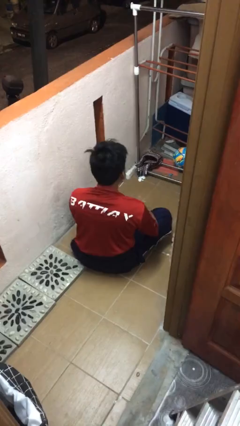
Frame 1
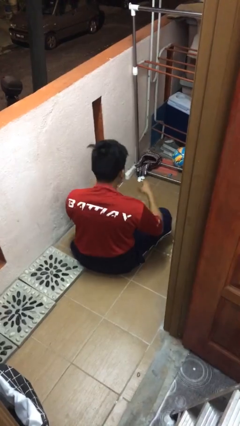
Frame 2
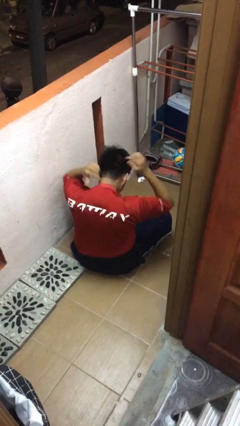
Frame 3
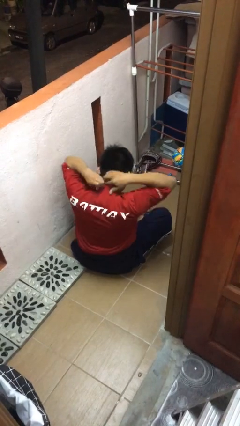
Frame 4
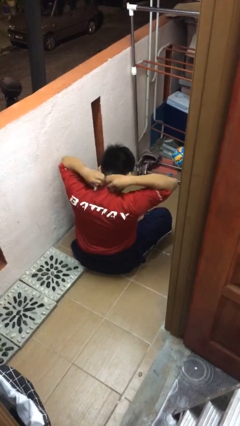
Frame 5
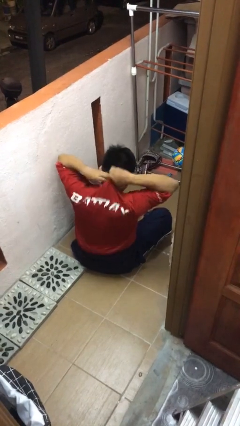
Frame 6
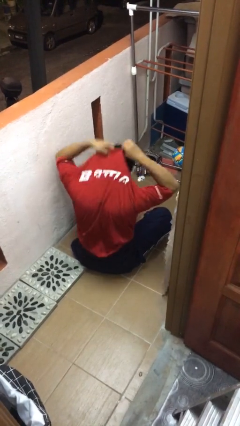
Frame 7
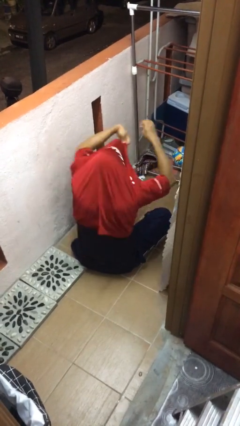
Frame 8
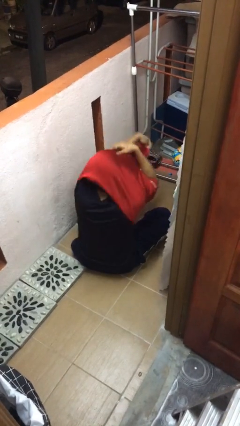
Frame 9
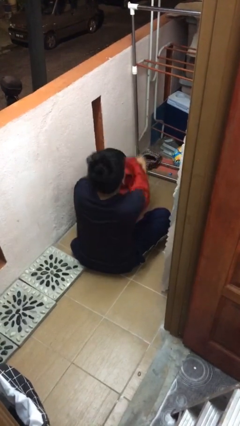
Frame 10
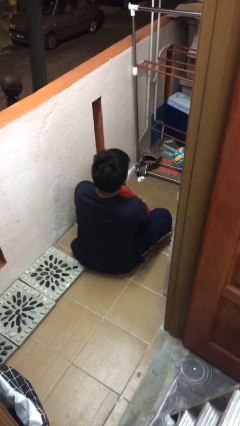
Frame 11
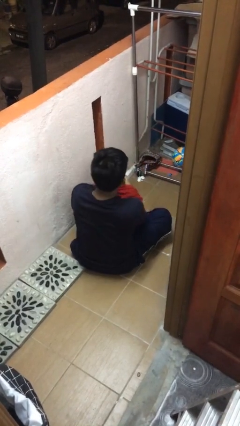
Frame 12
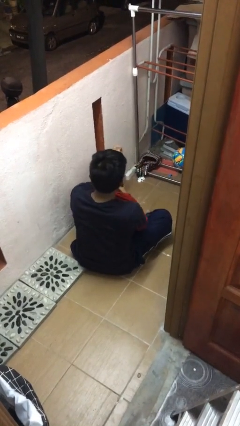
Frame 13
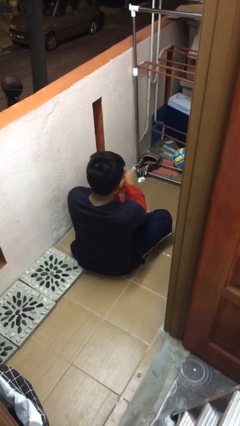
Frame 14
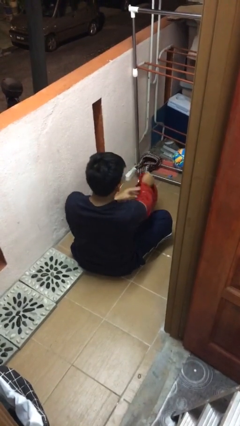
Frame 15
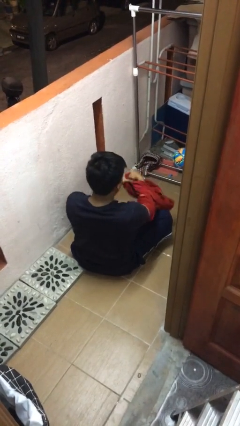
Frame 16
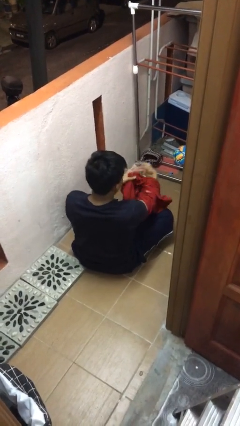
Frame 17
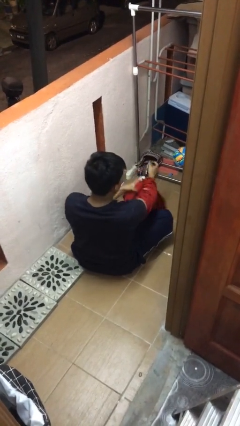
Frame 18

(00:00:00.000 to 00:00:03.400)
person takes off shirt

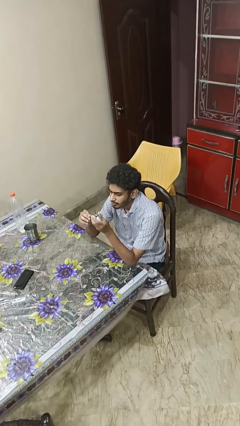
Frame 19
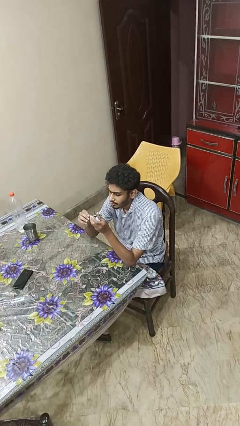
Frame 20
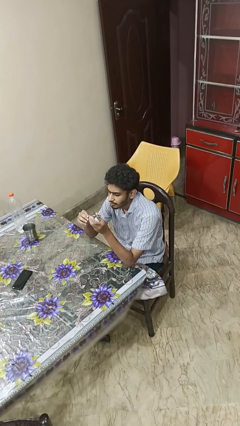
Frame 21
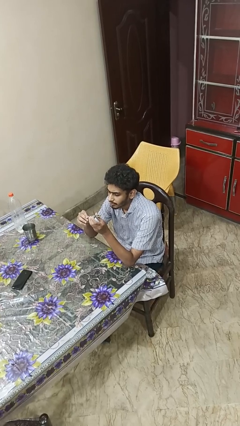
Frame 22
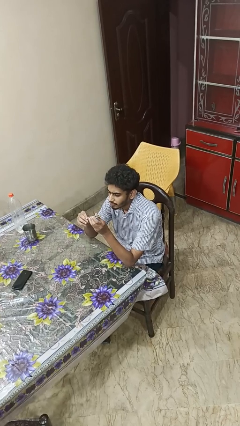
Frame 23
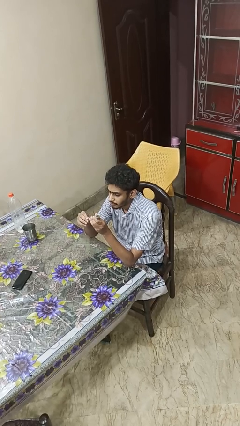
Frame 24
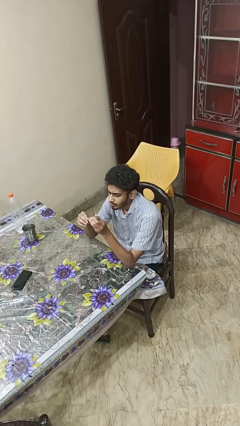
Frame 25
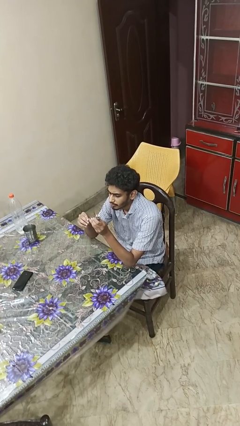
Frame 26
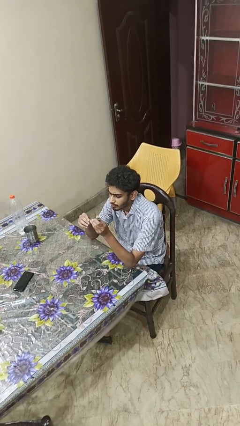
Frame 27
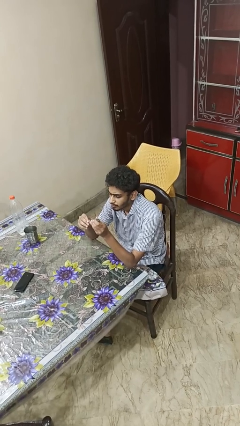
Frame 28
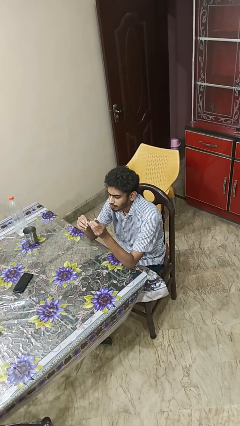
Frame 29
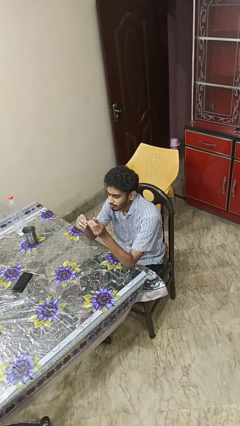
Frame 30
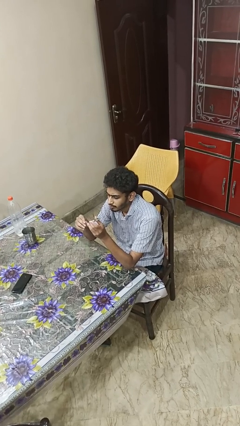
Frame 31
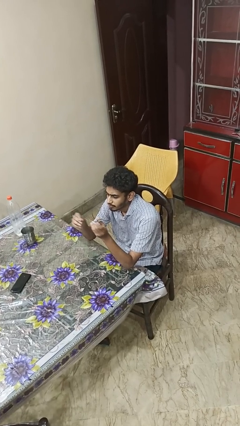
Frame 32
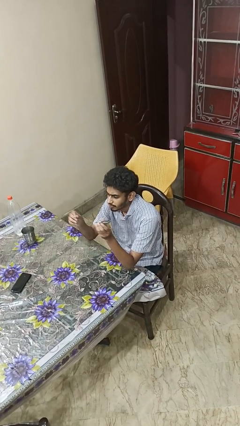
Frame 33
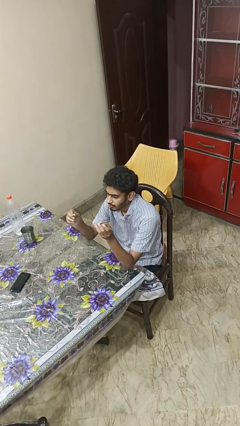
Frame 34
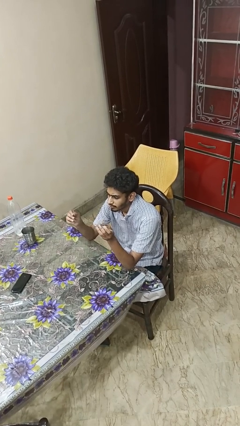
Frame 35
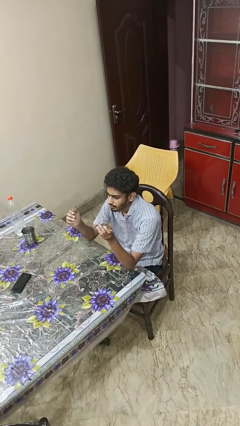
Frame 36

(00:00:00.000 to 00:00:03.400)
person clips fingernails

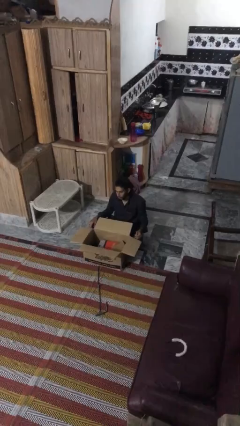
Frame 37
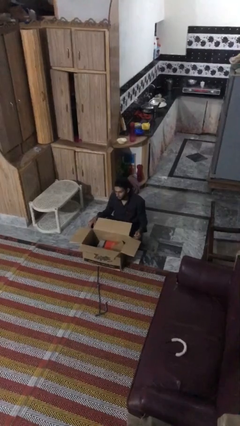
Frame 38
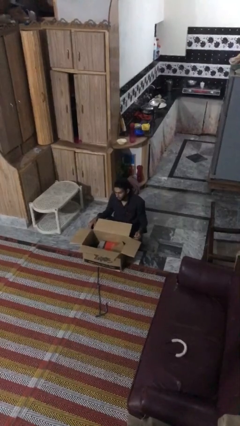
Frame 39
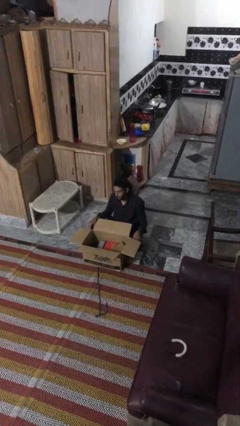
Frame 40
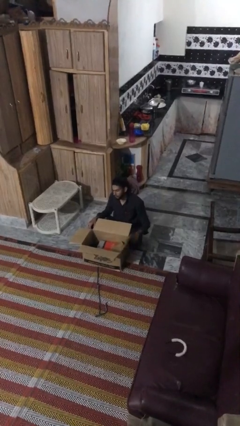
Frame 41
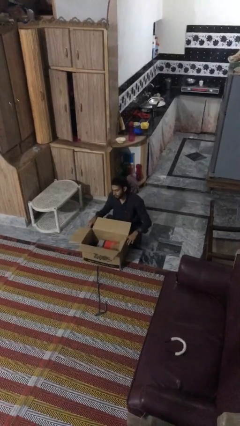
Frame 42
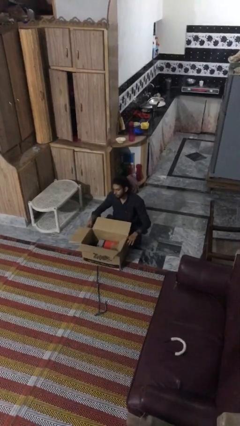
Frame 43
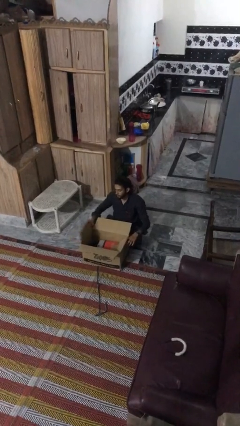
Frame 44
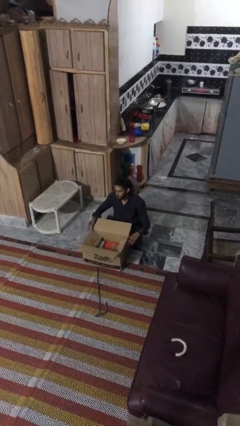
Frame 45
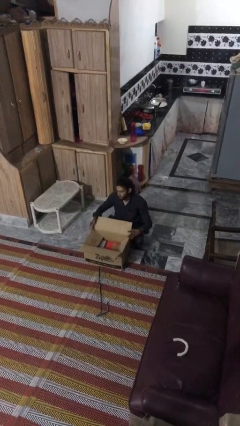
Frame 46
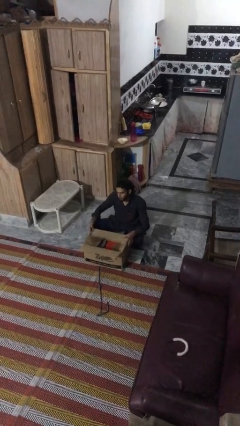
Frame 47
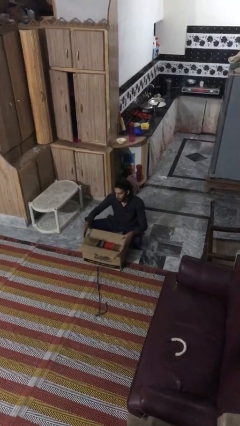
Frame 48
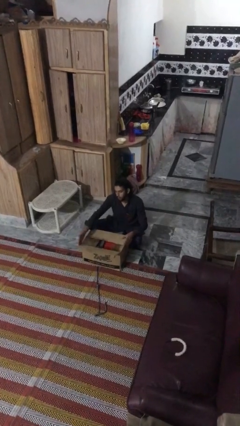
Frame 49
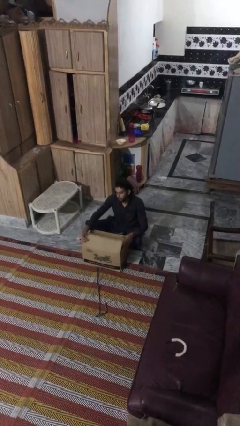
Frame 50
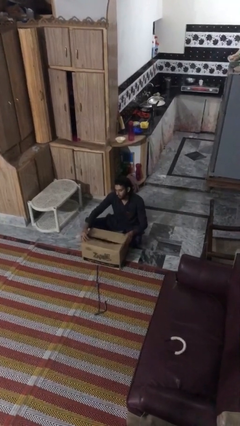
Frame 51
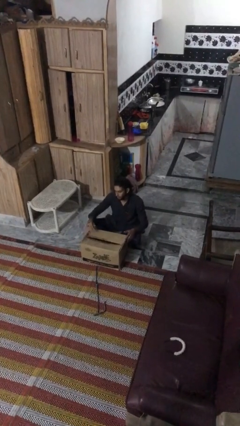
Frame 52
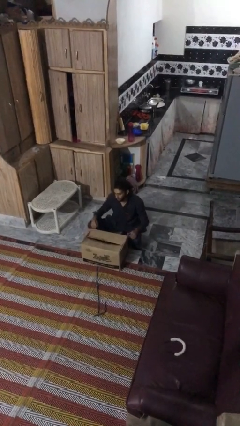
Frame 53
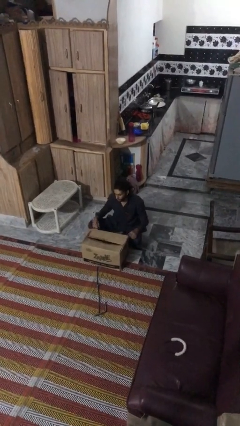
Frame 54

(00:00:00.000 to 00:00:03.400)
person closes box

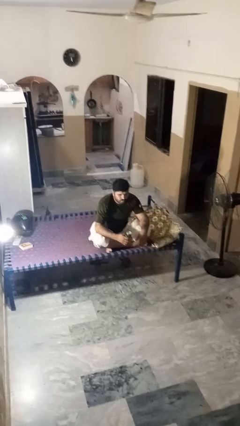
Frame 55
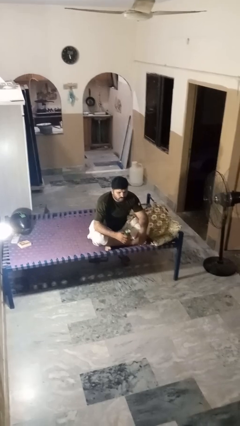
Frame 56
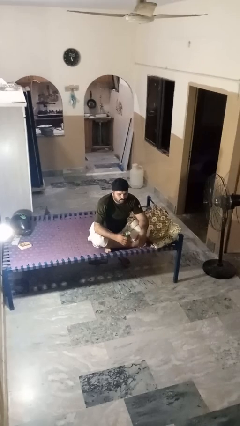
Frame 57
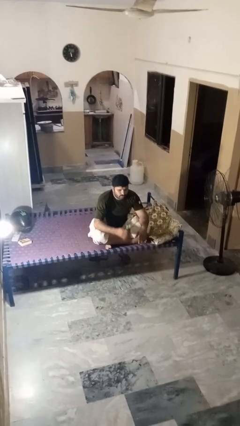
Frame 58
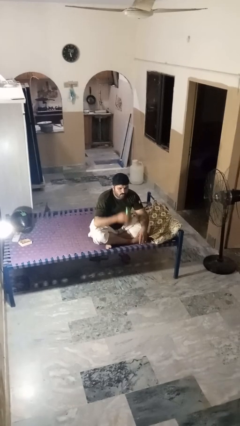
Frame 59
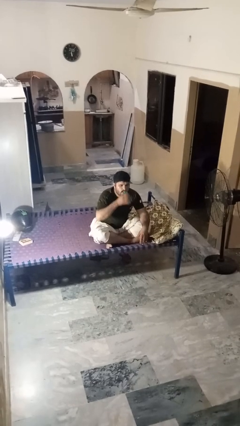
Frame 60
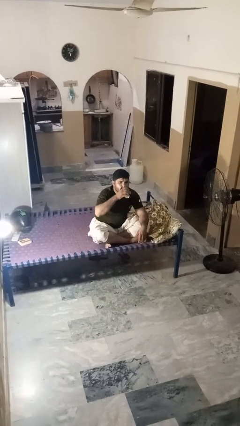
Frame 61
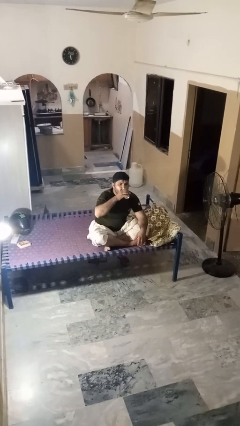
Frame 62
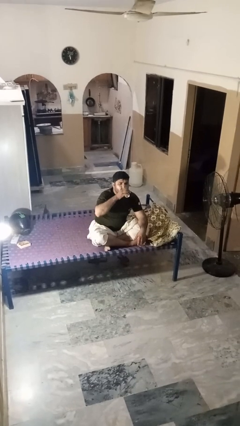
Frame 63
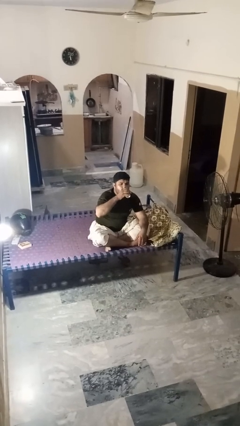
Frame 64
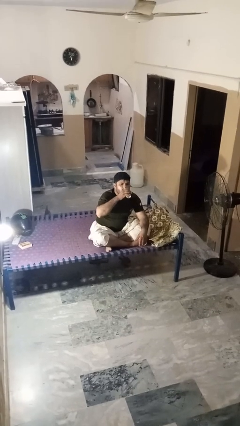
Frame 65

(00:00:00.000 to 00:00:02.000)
person drinks from beverage can

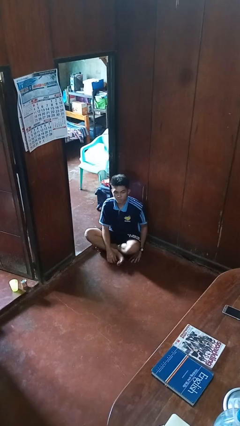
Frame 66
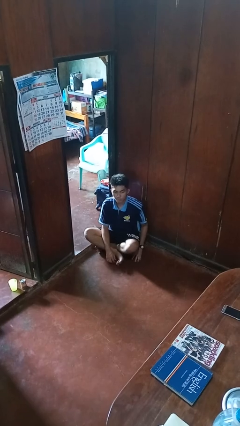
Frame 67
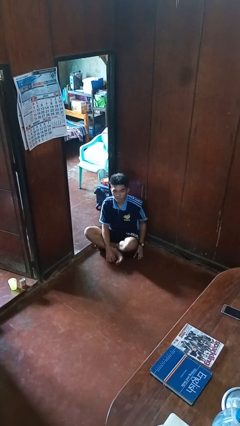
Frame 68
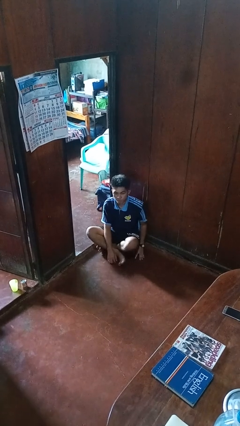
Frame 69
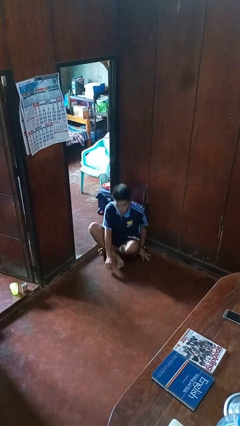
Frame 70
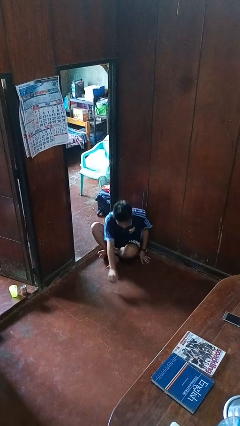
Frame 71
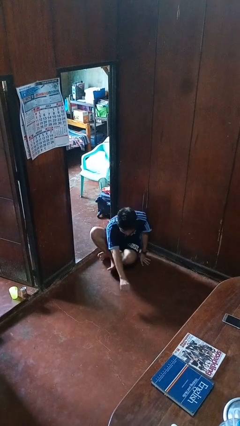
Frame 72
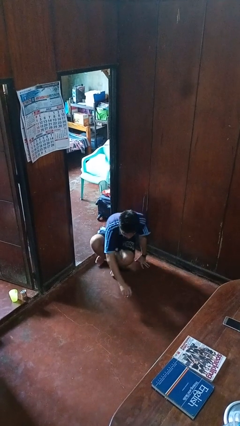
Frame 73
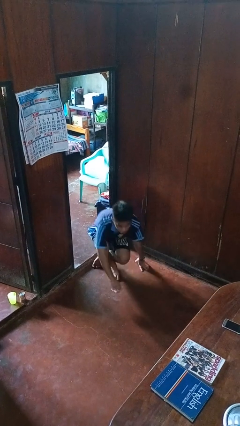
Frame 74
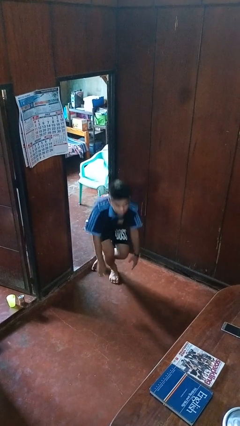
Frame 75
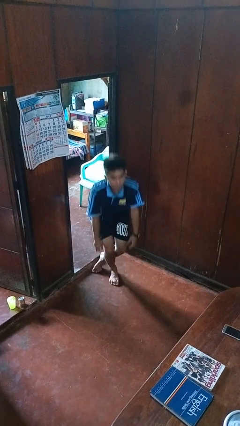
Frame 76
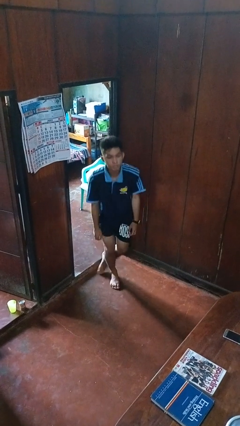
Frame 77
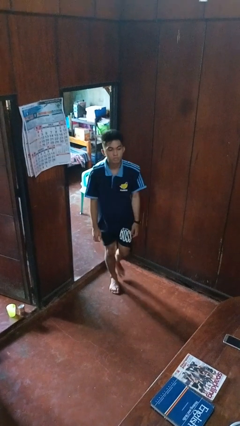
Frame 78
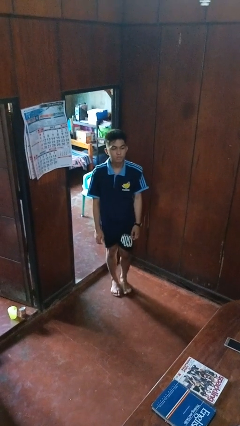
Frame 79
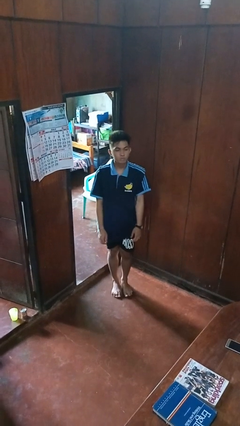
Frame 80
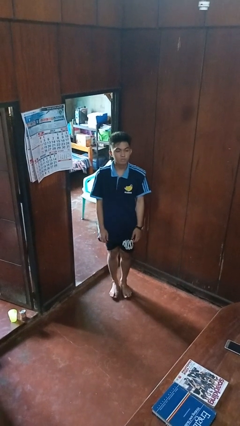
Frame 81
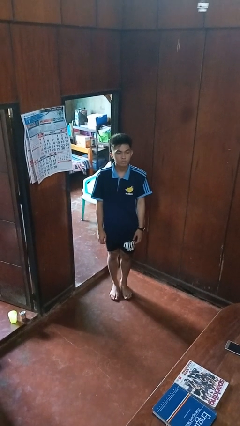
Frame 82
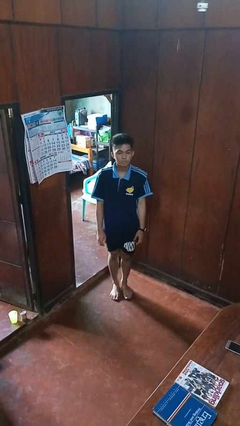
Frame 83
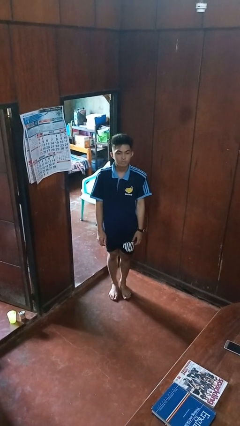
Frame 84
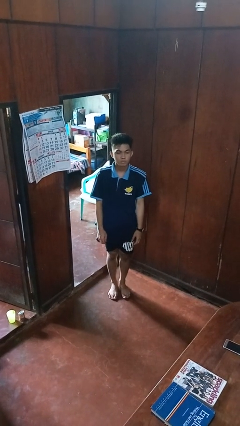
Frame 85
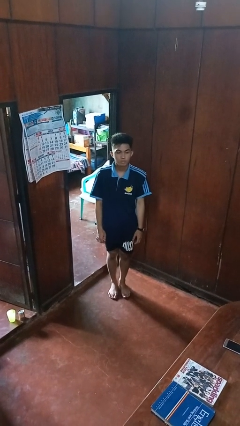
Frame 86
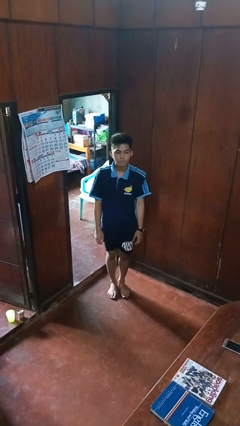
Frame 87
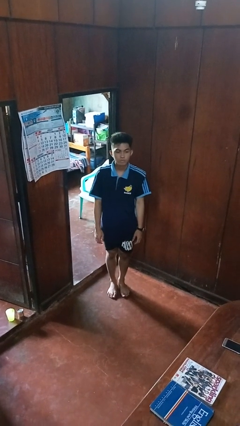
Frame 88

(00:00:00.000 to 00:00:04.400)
person stands up from floor

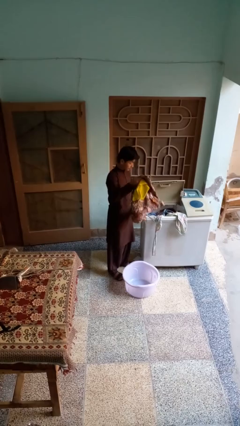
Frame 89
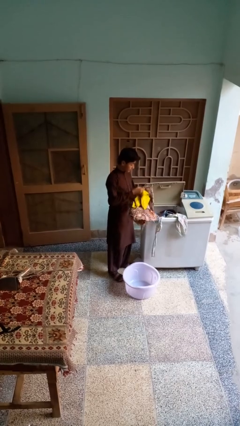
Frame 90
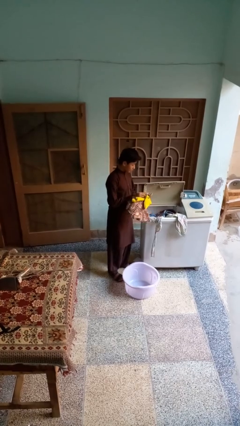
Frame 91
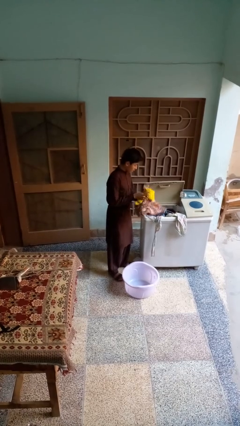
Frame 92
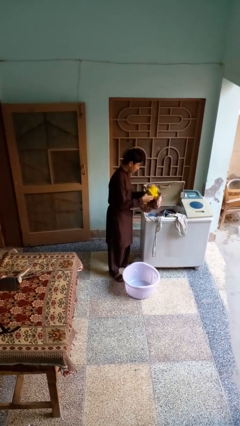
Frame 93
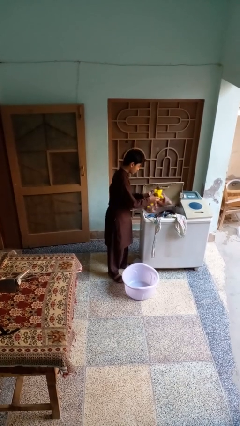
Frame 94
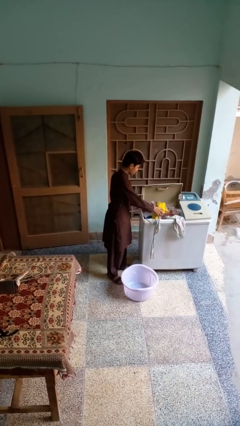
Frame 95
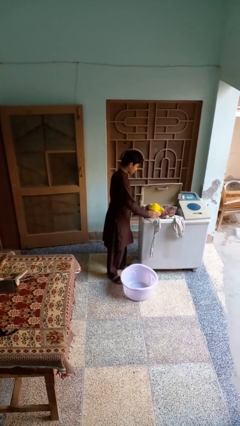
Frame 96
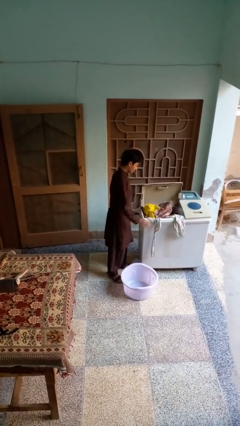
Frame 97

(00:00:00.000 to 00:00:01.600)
person unloads clotheswasher
